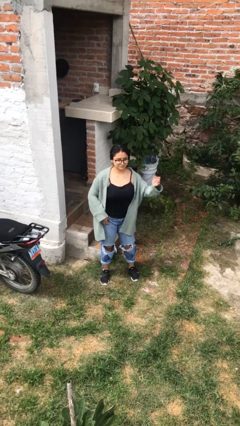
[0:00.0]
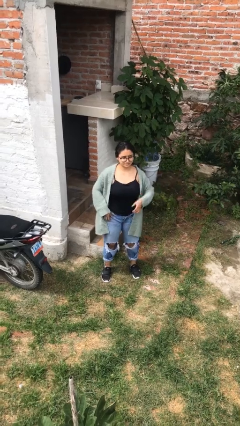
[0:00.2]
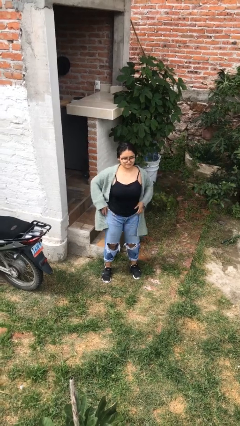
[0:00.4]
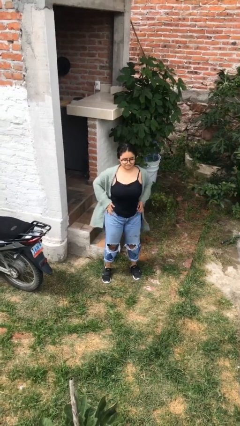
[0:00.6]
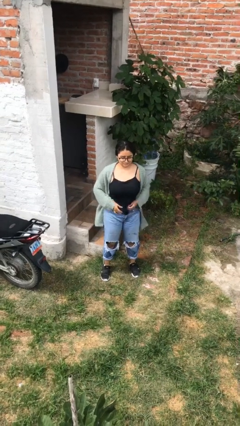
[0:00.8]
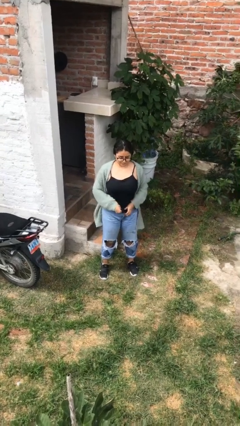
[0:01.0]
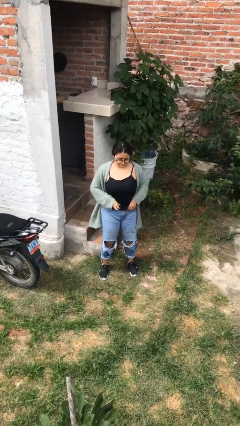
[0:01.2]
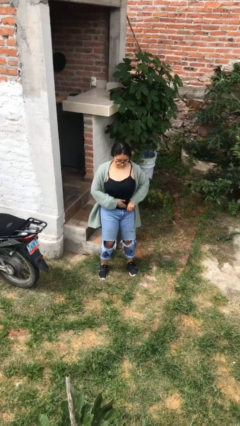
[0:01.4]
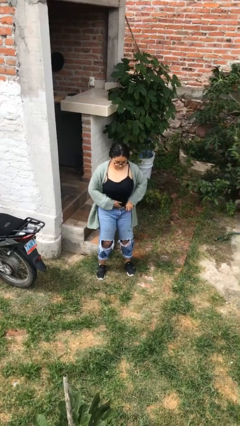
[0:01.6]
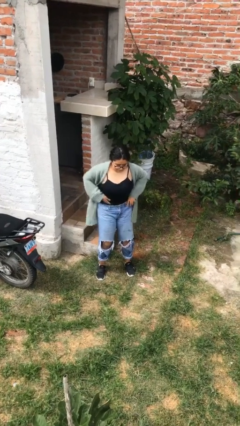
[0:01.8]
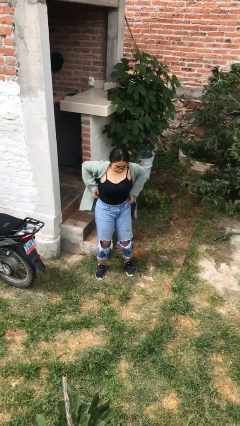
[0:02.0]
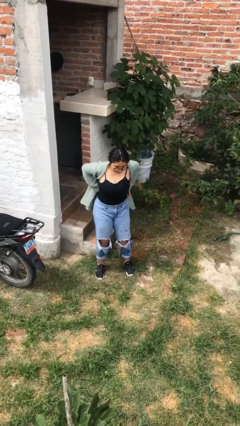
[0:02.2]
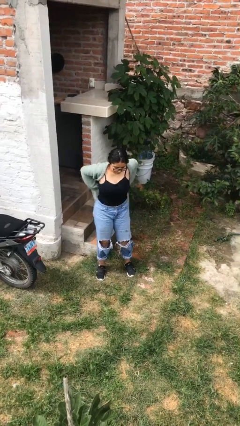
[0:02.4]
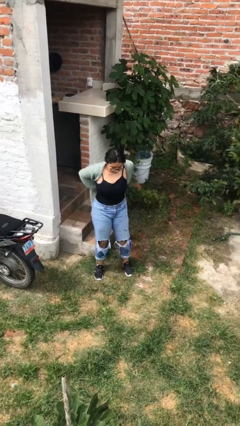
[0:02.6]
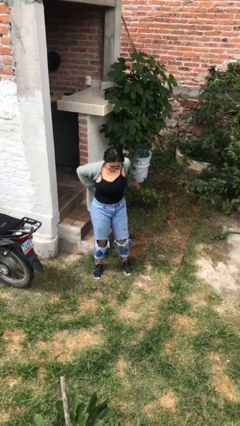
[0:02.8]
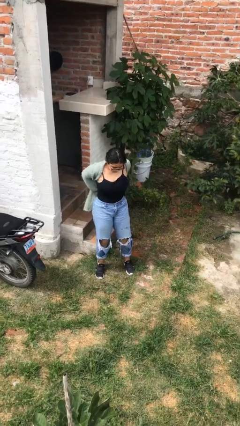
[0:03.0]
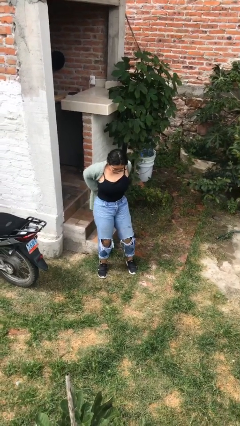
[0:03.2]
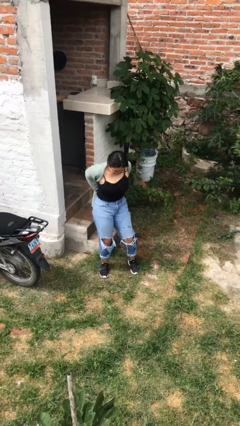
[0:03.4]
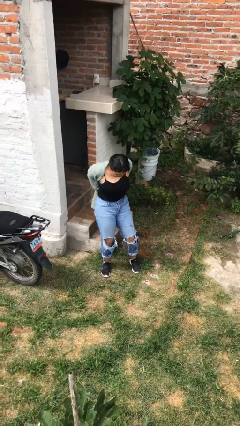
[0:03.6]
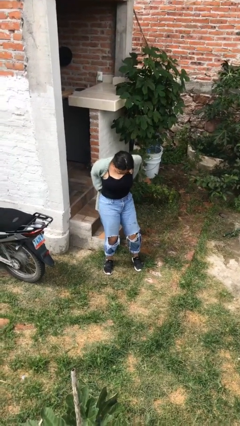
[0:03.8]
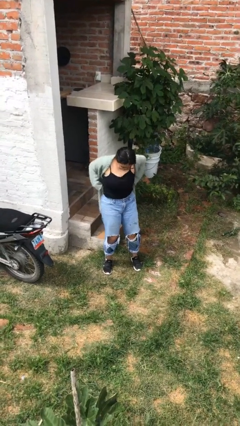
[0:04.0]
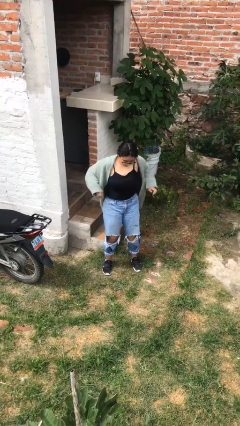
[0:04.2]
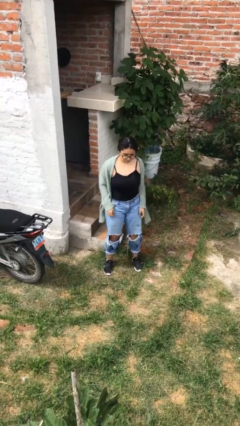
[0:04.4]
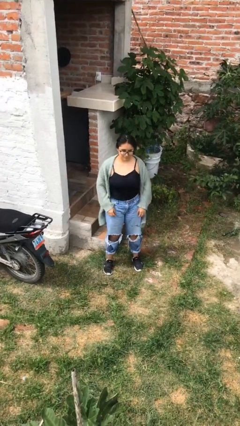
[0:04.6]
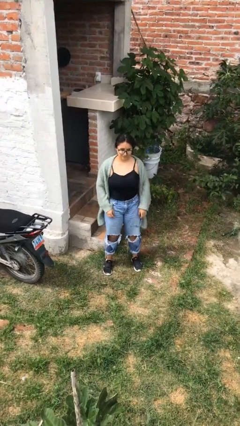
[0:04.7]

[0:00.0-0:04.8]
person tucks in shirt

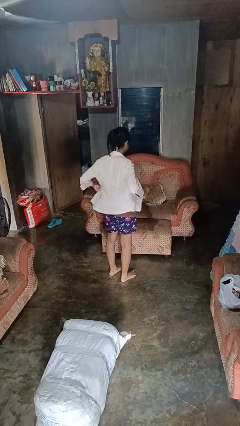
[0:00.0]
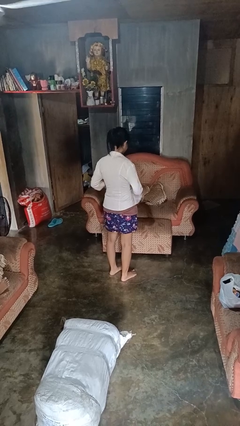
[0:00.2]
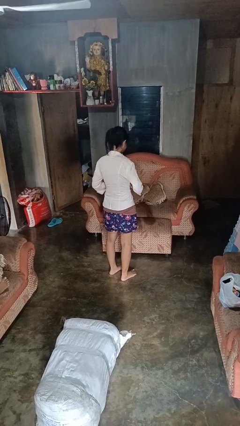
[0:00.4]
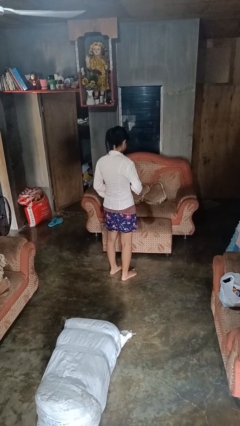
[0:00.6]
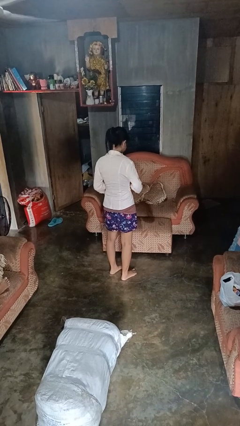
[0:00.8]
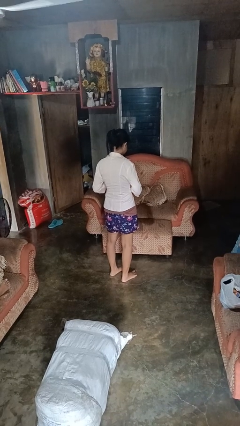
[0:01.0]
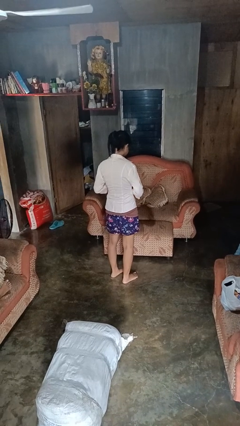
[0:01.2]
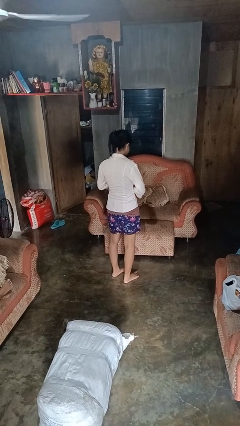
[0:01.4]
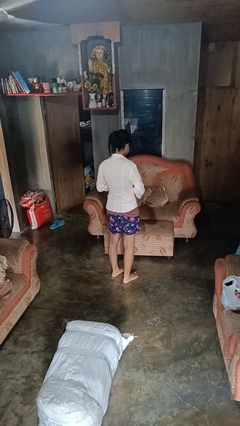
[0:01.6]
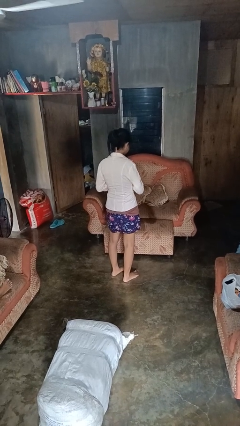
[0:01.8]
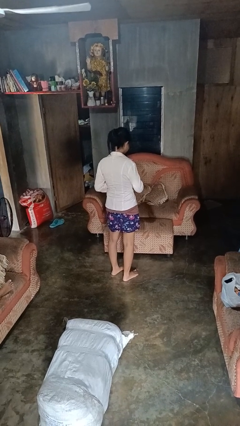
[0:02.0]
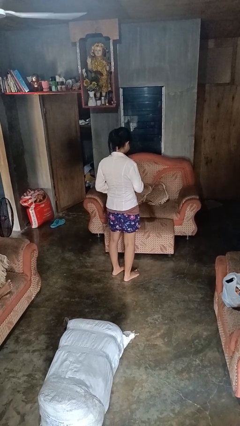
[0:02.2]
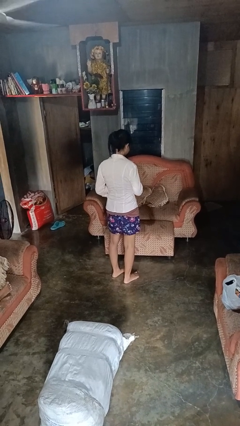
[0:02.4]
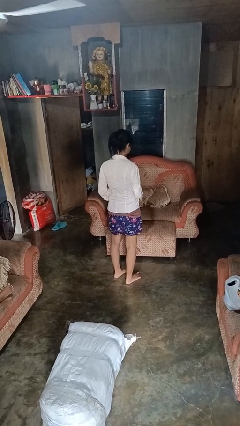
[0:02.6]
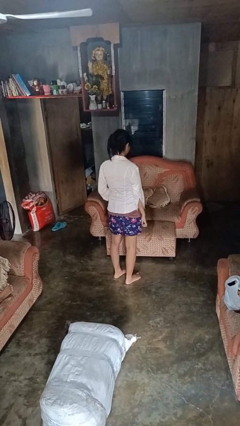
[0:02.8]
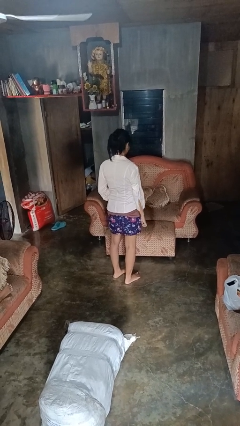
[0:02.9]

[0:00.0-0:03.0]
person buttons shirt

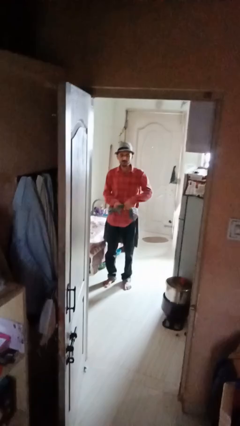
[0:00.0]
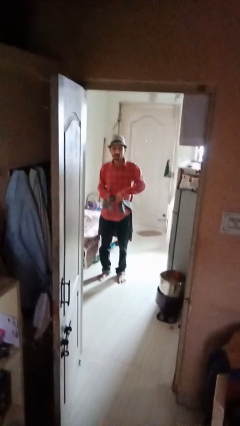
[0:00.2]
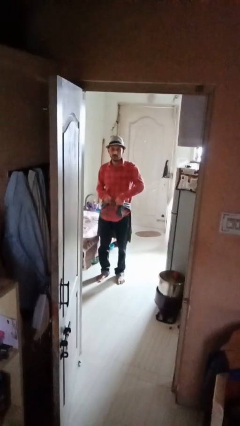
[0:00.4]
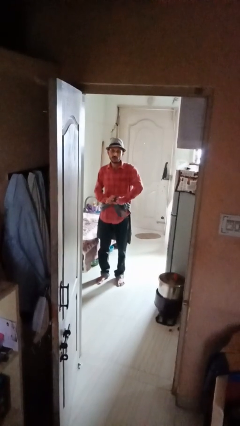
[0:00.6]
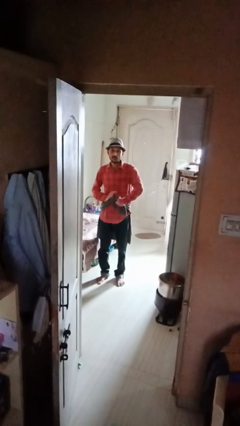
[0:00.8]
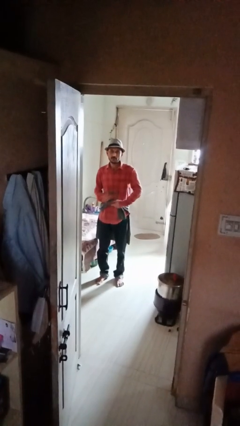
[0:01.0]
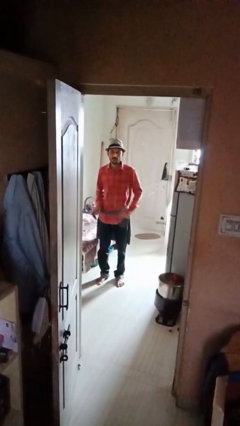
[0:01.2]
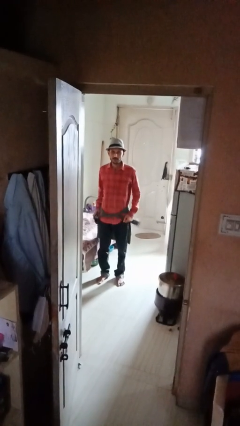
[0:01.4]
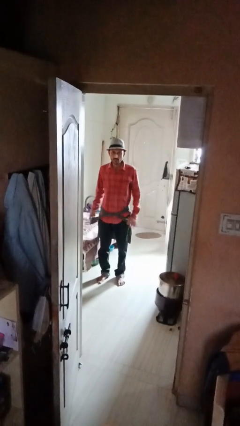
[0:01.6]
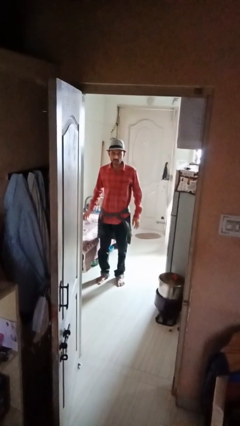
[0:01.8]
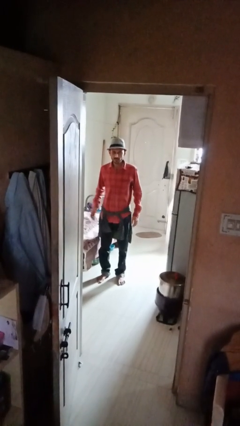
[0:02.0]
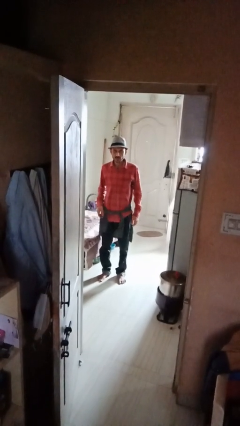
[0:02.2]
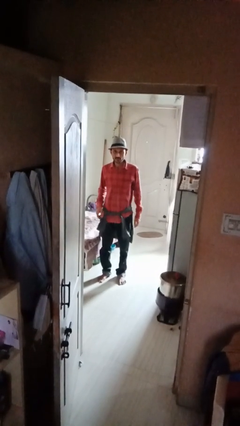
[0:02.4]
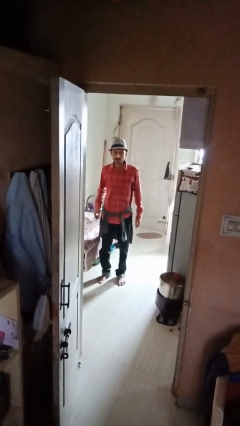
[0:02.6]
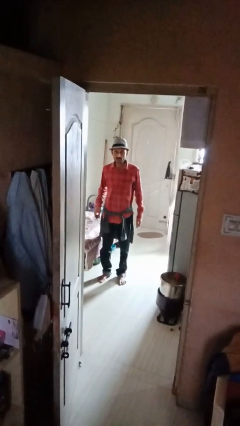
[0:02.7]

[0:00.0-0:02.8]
person ties jacket around waist

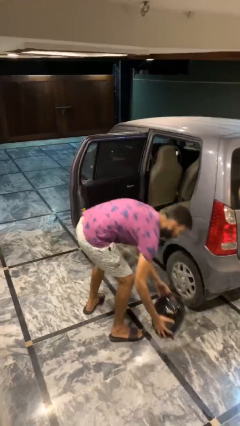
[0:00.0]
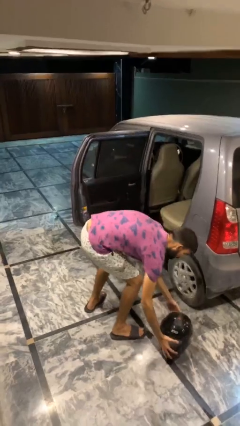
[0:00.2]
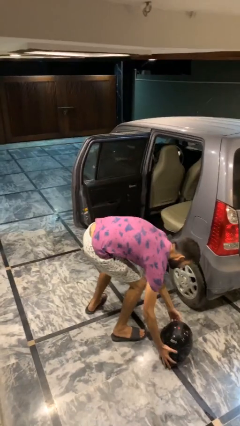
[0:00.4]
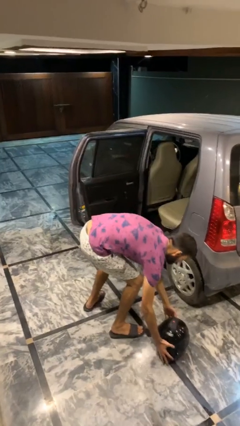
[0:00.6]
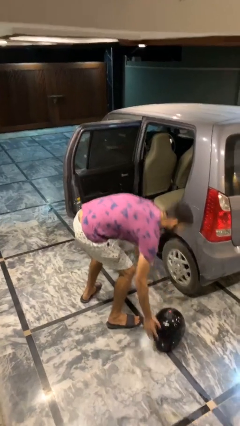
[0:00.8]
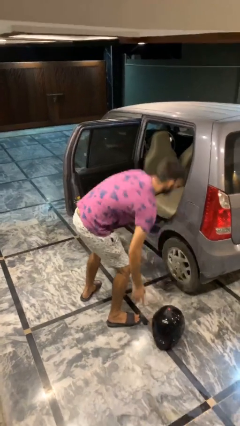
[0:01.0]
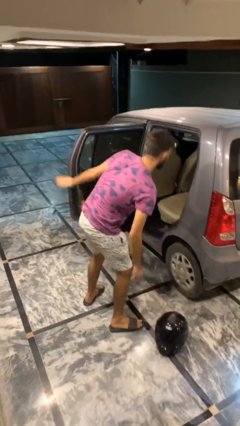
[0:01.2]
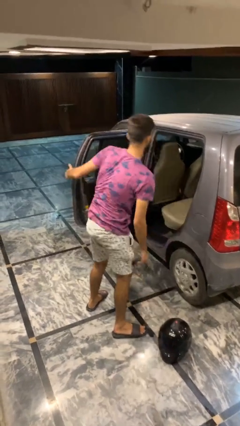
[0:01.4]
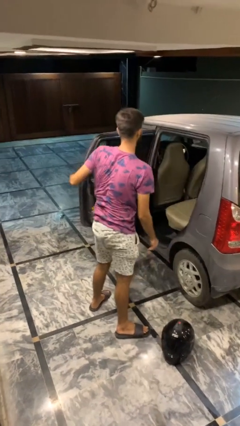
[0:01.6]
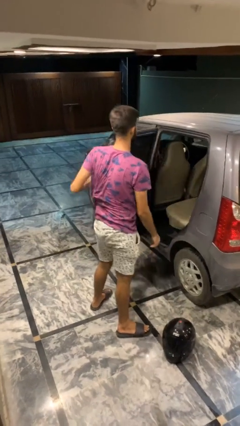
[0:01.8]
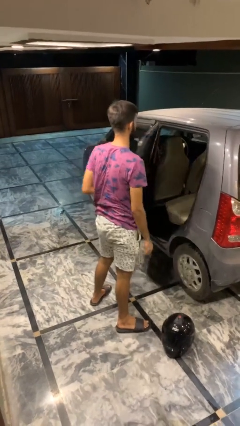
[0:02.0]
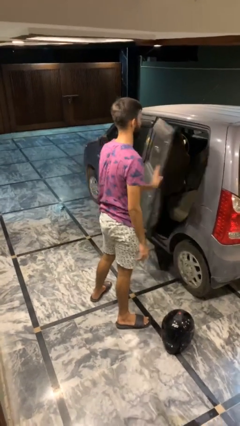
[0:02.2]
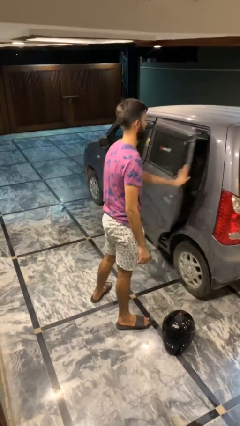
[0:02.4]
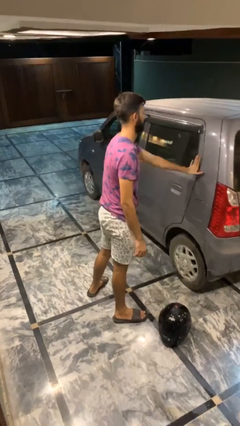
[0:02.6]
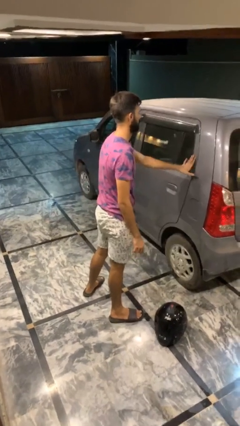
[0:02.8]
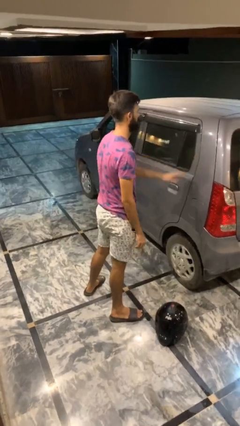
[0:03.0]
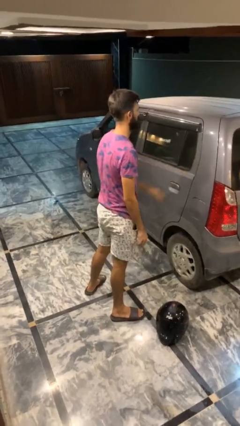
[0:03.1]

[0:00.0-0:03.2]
person closes car door

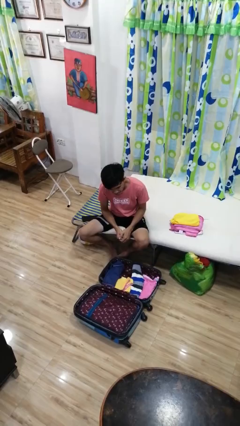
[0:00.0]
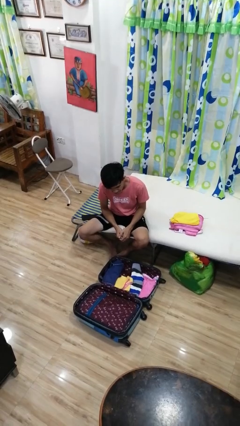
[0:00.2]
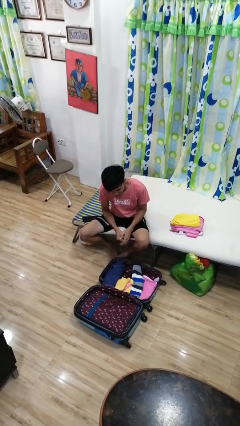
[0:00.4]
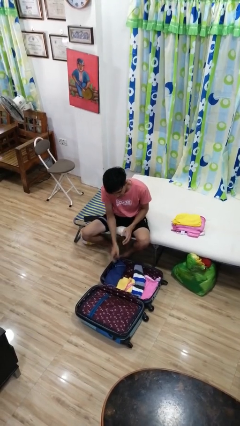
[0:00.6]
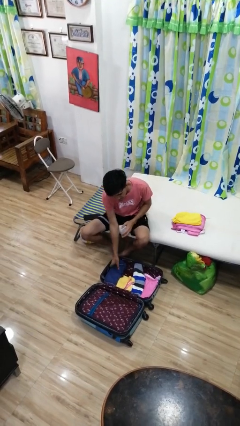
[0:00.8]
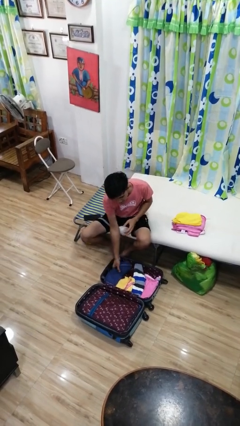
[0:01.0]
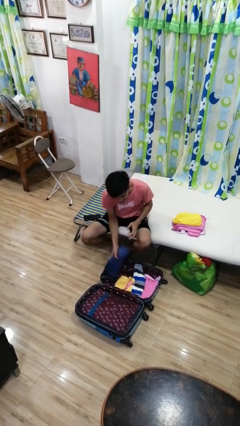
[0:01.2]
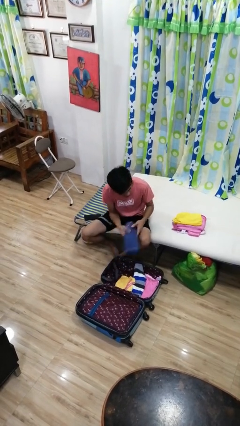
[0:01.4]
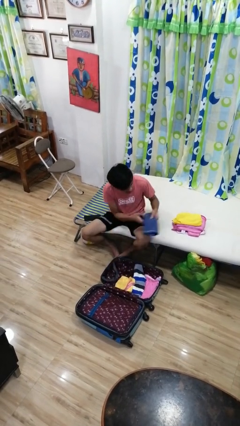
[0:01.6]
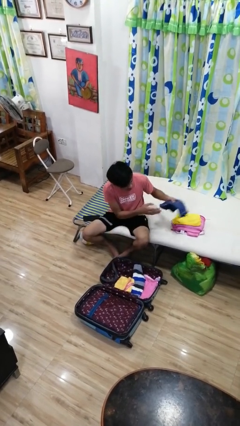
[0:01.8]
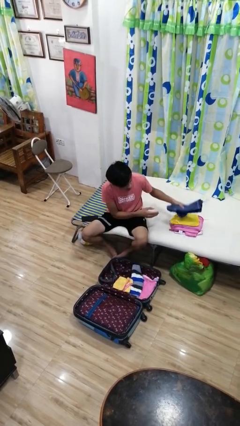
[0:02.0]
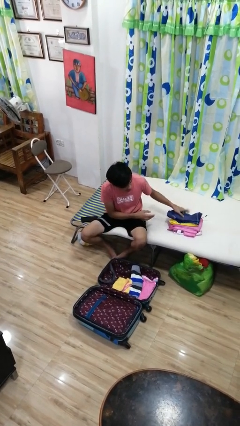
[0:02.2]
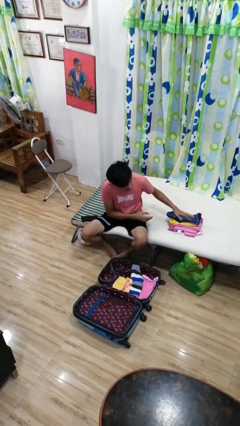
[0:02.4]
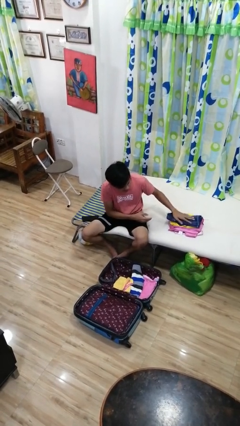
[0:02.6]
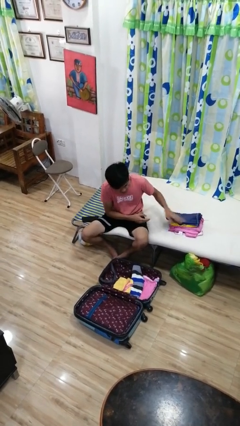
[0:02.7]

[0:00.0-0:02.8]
person unloads clothes from suitcase

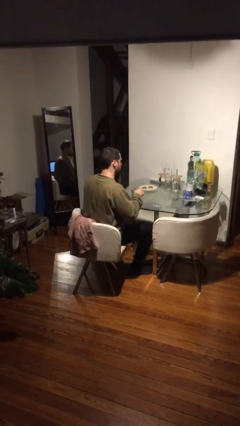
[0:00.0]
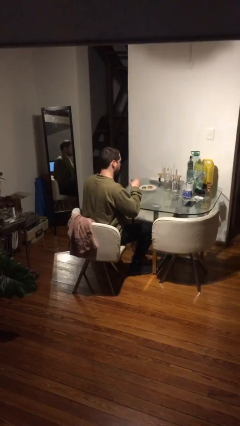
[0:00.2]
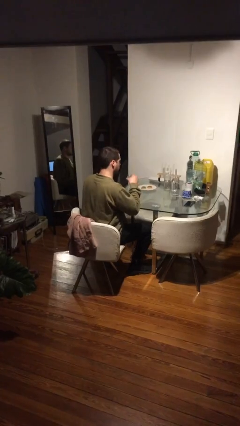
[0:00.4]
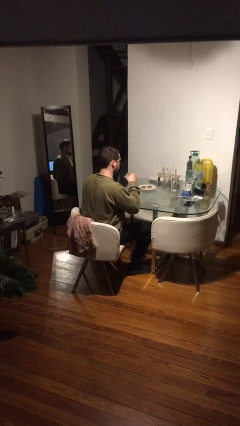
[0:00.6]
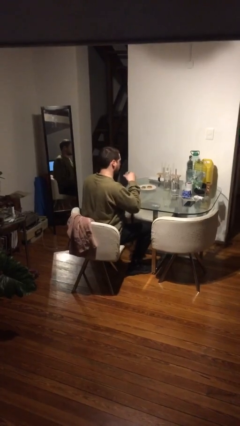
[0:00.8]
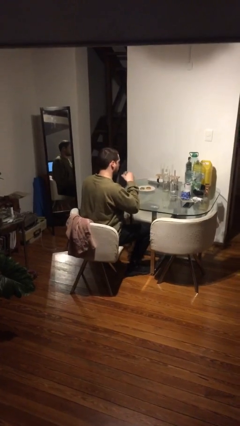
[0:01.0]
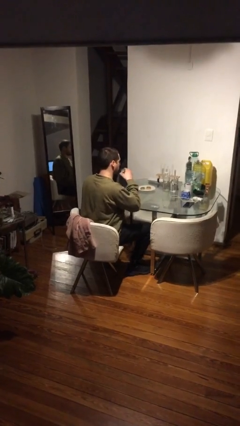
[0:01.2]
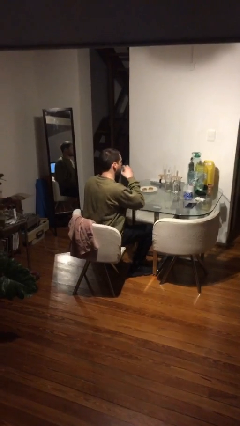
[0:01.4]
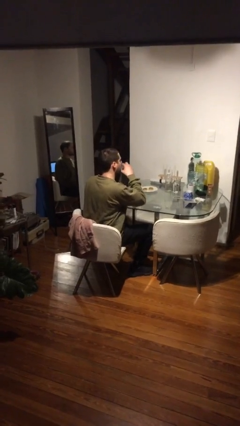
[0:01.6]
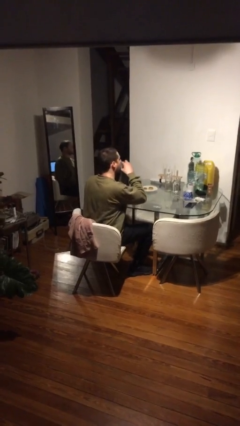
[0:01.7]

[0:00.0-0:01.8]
person picks up object from table
